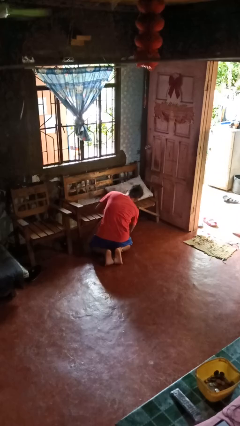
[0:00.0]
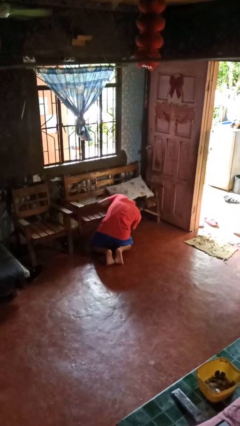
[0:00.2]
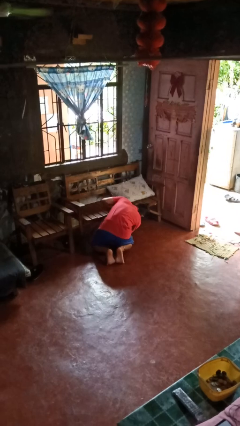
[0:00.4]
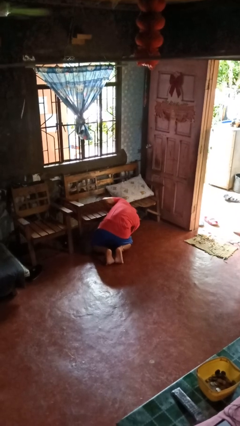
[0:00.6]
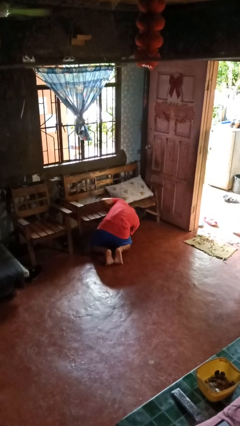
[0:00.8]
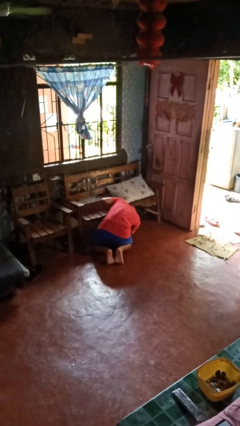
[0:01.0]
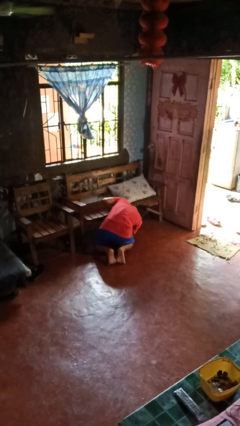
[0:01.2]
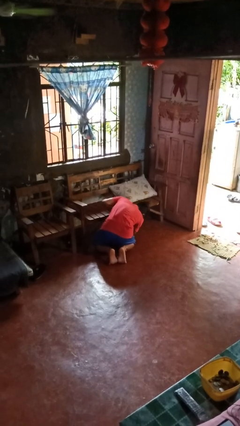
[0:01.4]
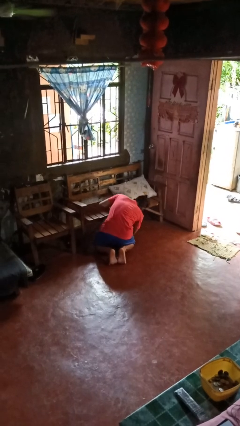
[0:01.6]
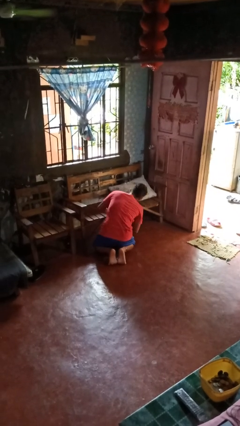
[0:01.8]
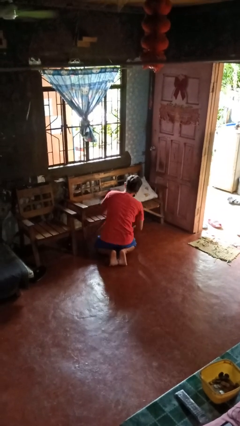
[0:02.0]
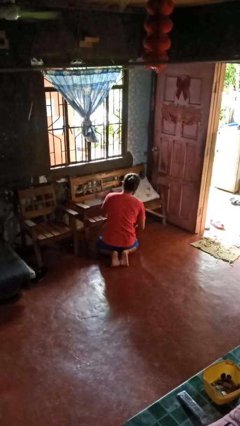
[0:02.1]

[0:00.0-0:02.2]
person searches in couch

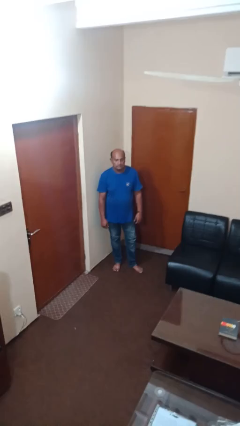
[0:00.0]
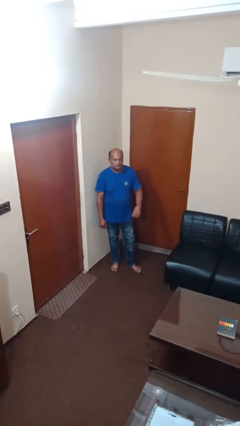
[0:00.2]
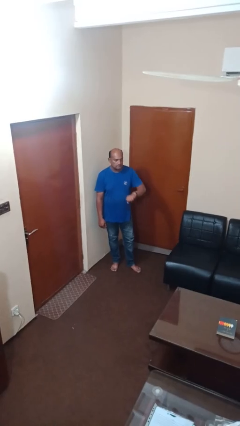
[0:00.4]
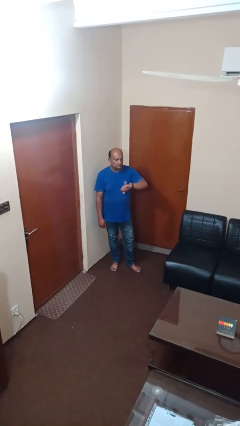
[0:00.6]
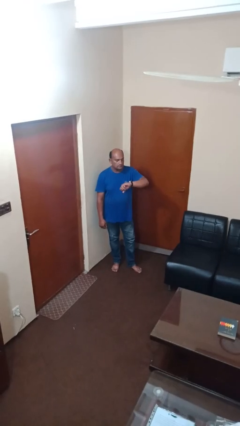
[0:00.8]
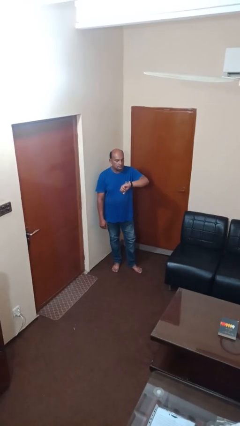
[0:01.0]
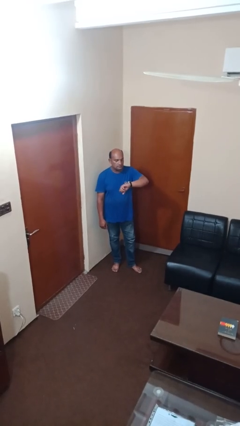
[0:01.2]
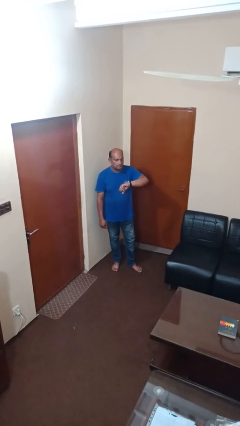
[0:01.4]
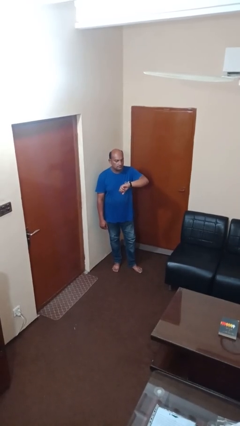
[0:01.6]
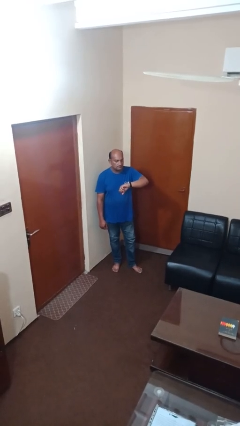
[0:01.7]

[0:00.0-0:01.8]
person looks at wristwatch

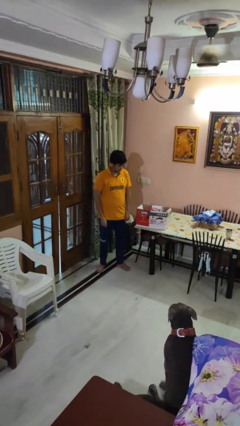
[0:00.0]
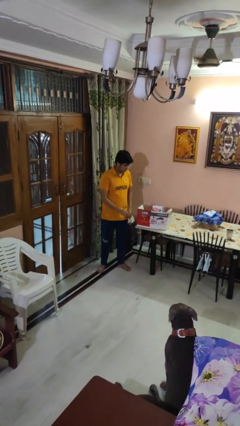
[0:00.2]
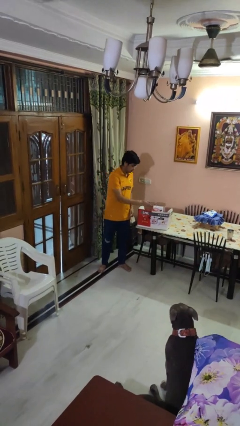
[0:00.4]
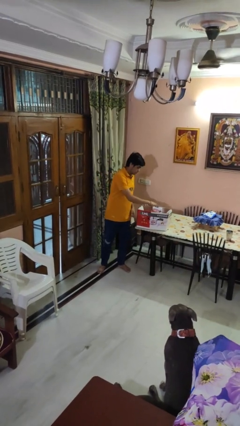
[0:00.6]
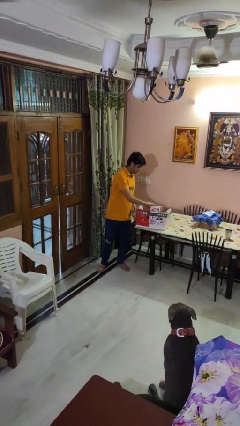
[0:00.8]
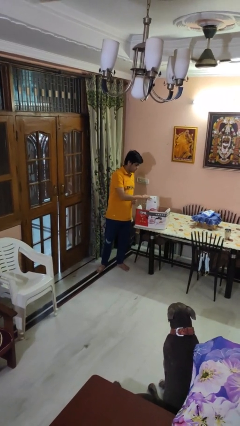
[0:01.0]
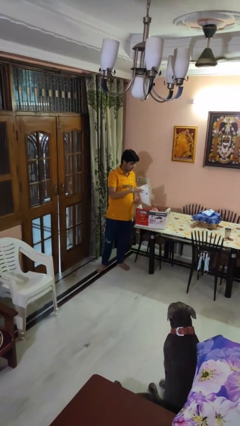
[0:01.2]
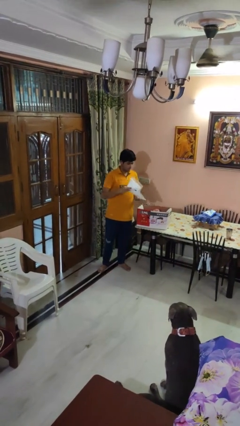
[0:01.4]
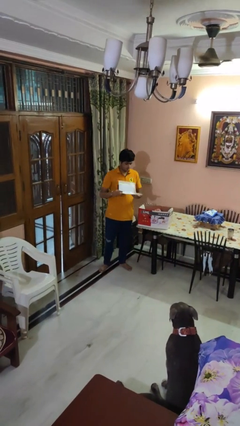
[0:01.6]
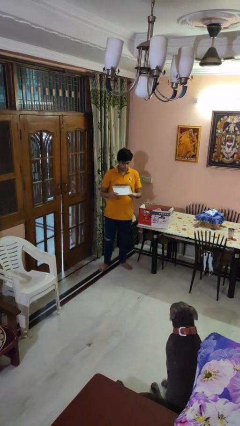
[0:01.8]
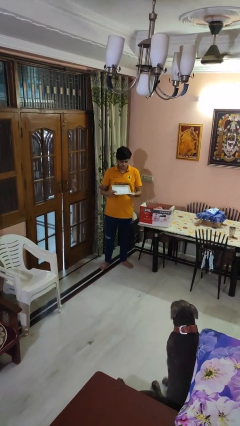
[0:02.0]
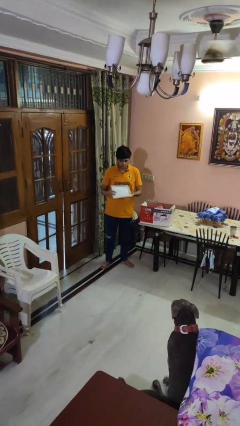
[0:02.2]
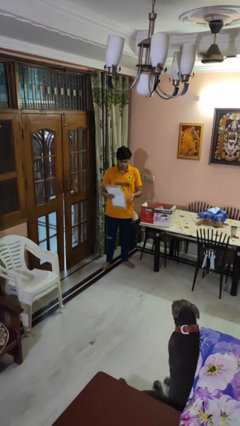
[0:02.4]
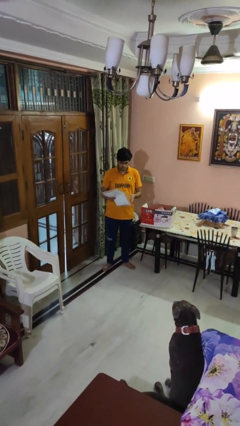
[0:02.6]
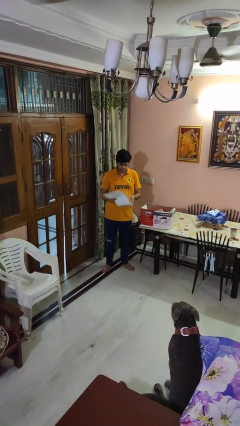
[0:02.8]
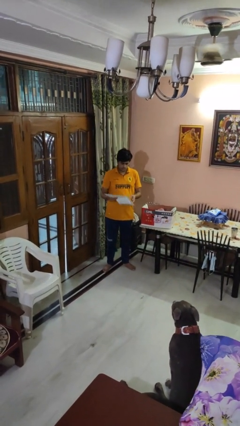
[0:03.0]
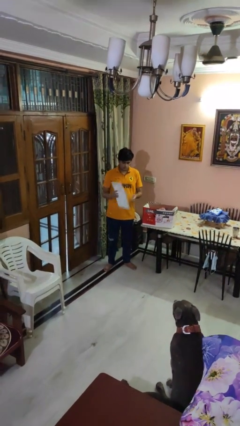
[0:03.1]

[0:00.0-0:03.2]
person takes object from box

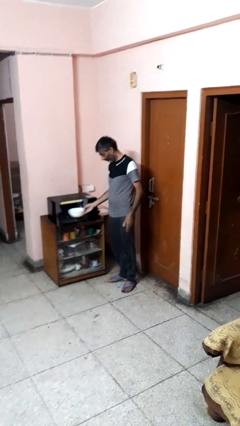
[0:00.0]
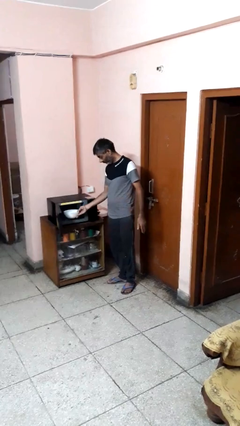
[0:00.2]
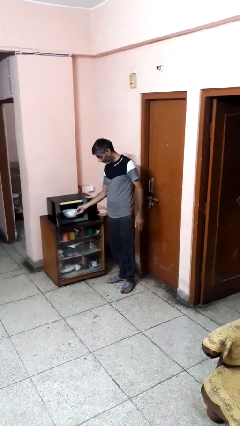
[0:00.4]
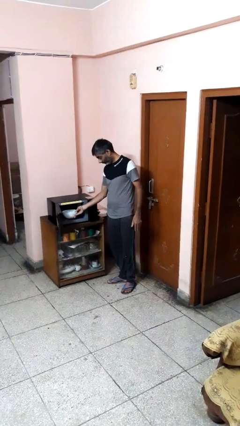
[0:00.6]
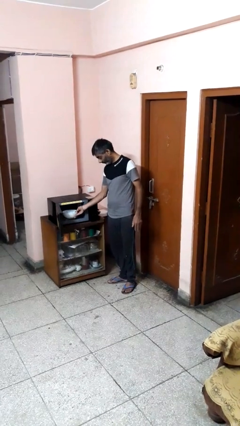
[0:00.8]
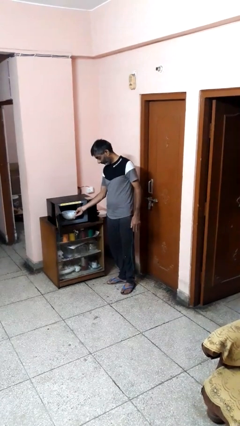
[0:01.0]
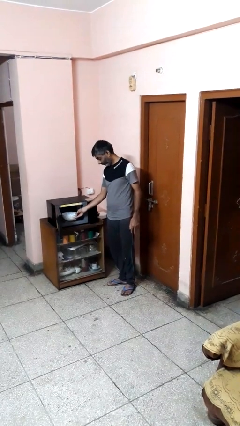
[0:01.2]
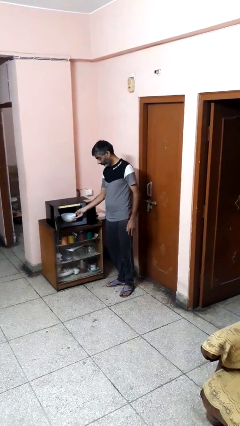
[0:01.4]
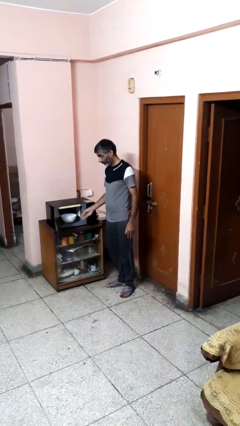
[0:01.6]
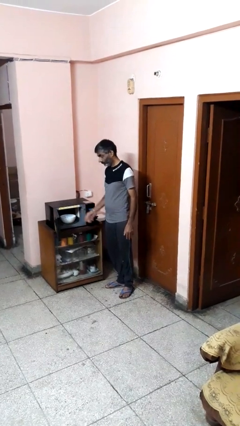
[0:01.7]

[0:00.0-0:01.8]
person puts object into microwave

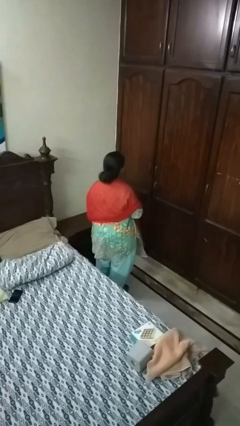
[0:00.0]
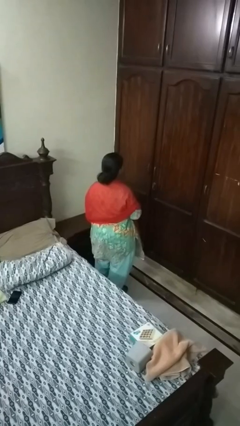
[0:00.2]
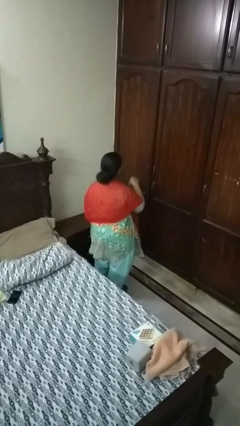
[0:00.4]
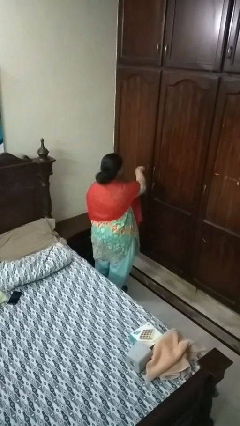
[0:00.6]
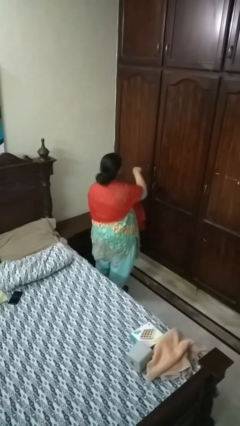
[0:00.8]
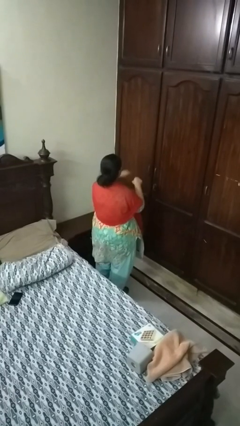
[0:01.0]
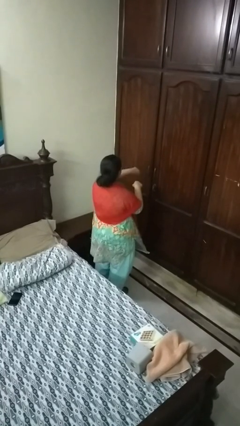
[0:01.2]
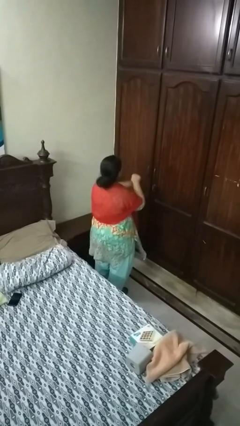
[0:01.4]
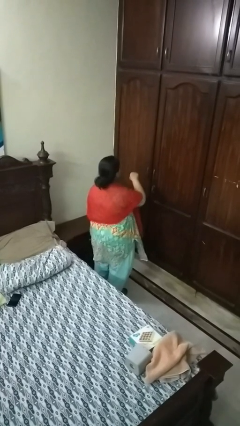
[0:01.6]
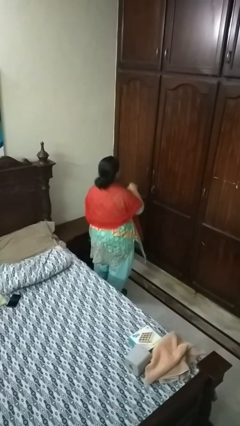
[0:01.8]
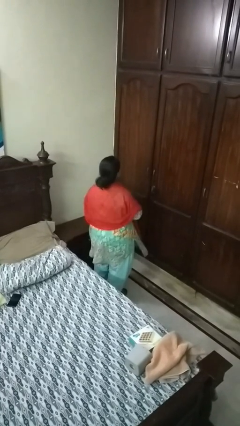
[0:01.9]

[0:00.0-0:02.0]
person punches

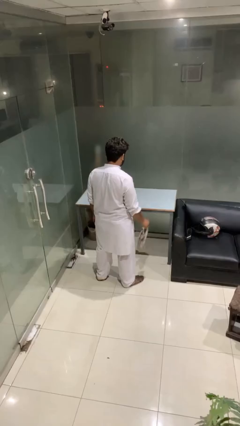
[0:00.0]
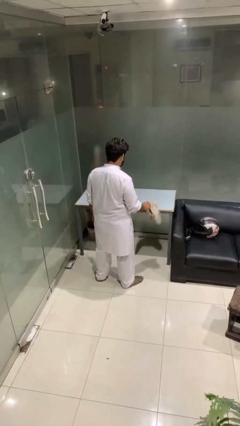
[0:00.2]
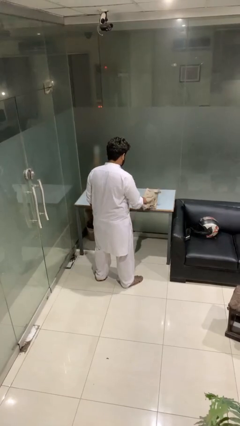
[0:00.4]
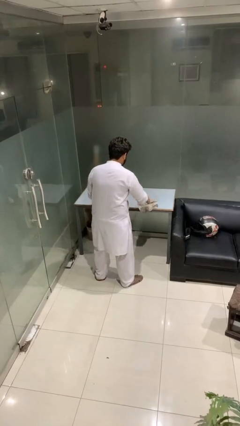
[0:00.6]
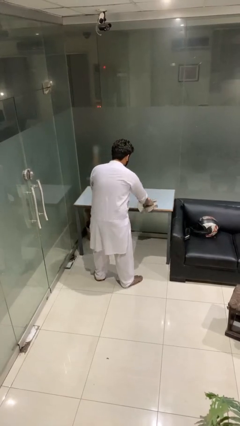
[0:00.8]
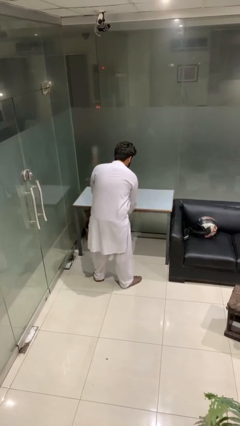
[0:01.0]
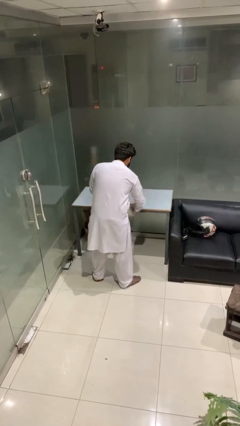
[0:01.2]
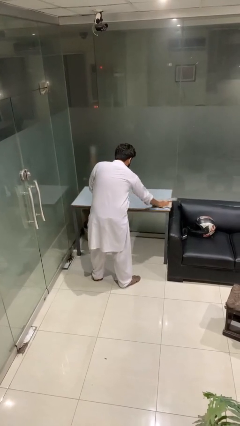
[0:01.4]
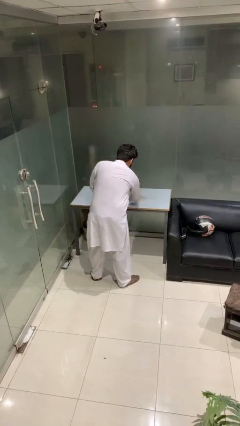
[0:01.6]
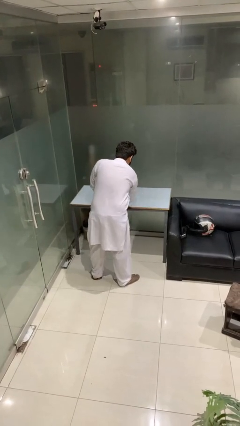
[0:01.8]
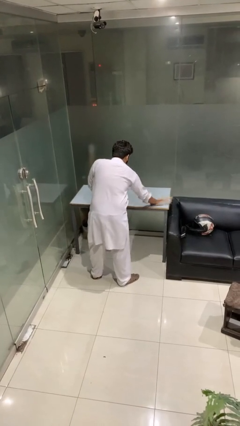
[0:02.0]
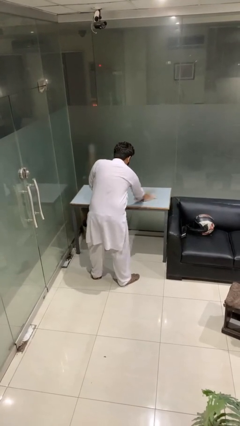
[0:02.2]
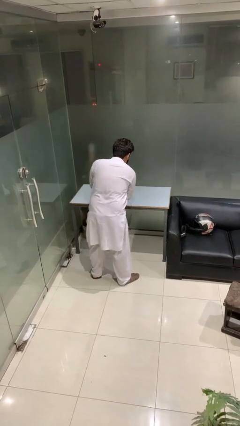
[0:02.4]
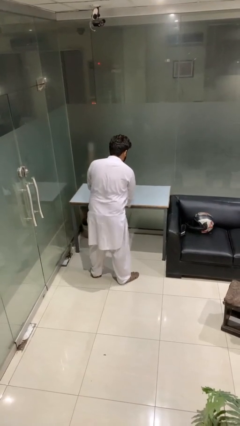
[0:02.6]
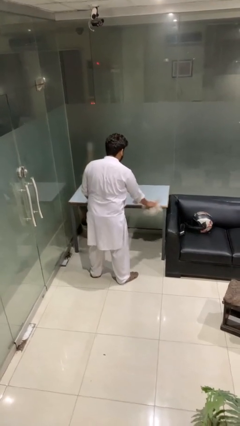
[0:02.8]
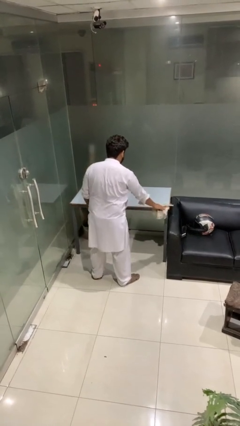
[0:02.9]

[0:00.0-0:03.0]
person cleans table with rag

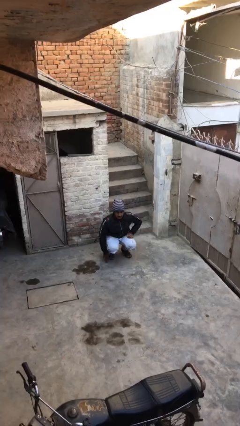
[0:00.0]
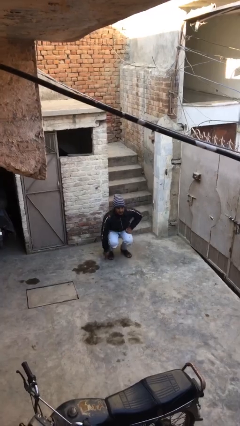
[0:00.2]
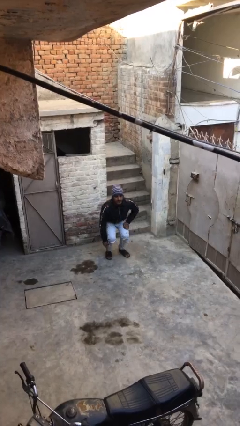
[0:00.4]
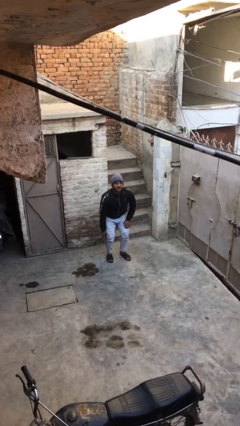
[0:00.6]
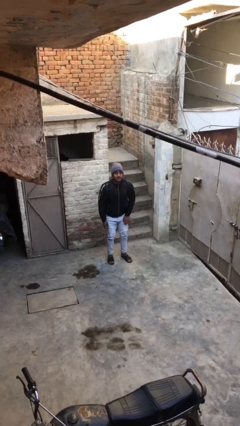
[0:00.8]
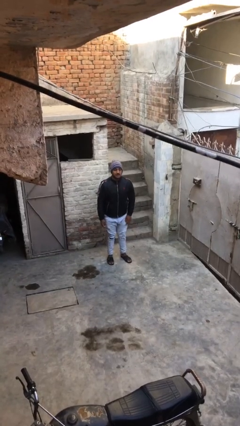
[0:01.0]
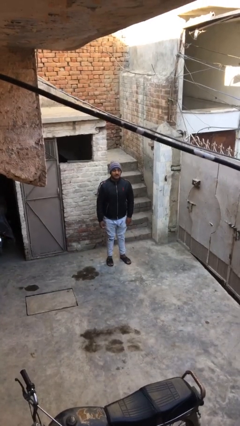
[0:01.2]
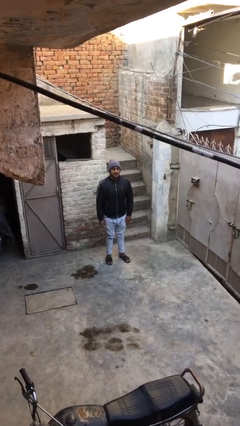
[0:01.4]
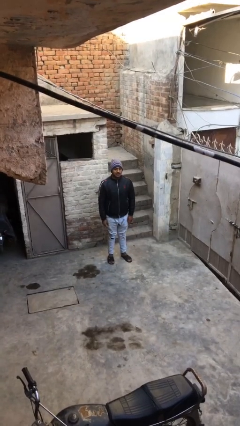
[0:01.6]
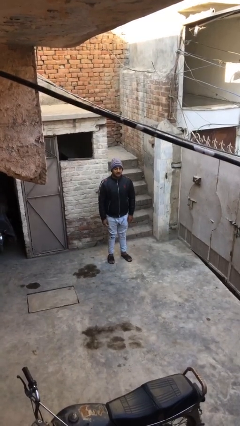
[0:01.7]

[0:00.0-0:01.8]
person stands up

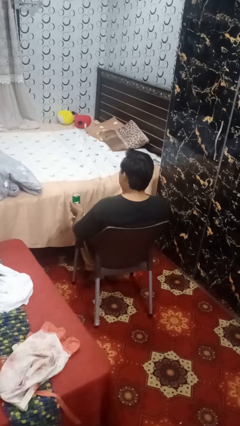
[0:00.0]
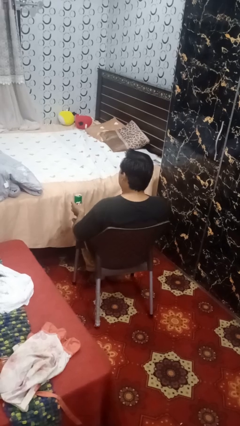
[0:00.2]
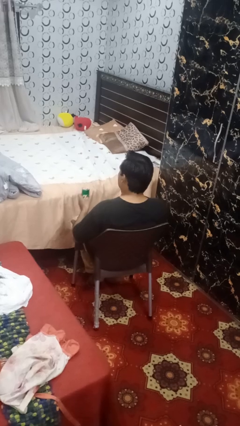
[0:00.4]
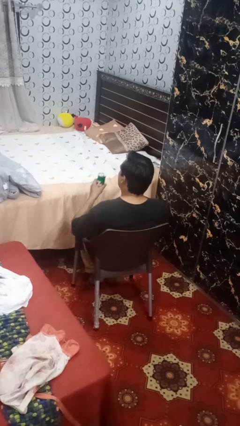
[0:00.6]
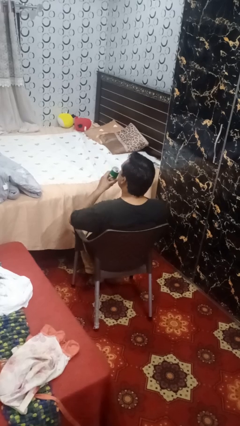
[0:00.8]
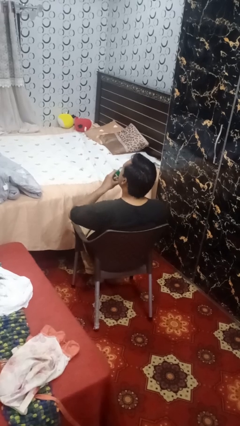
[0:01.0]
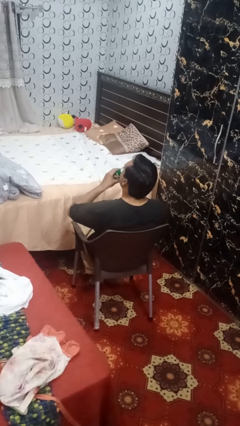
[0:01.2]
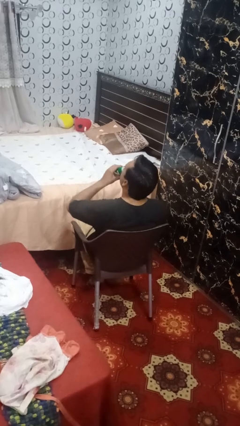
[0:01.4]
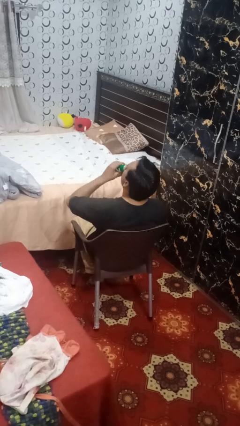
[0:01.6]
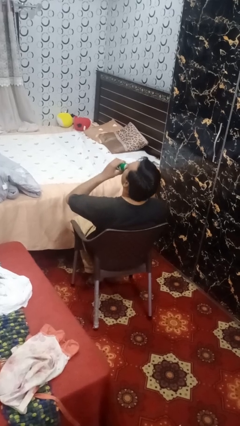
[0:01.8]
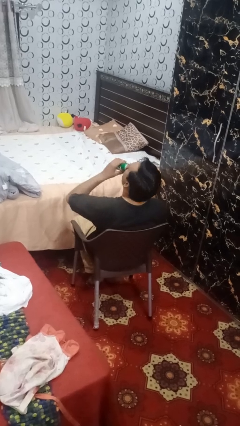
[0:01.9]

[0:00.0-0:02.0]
person drinks from beverage can
